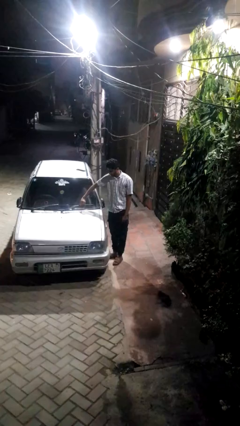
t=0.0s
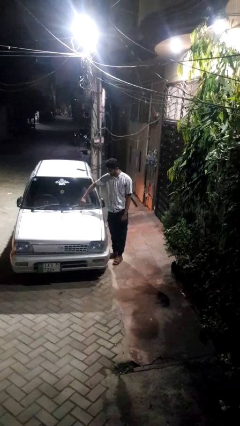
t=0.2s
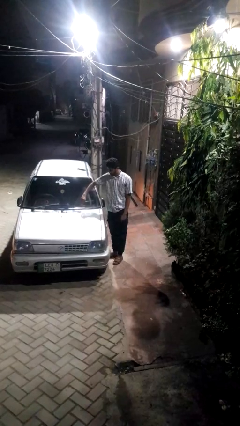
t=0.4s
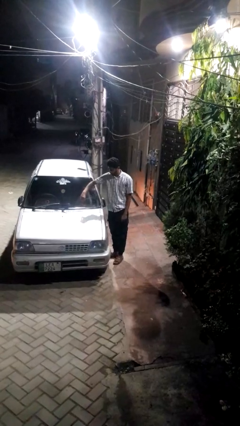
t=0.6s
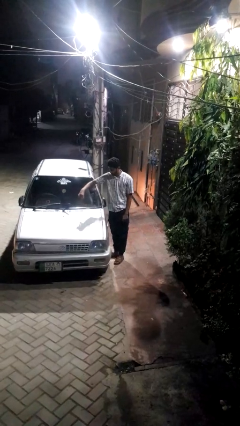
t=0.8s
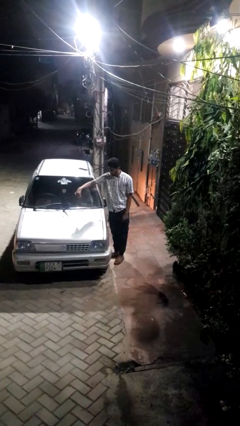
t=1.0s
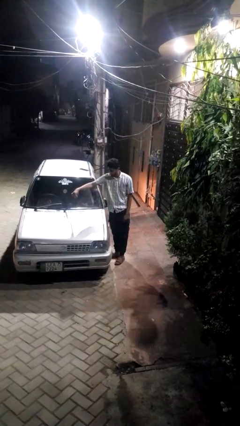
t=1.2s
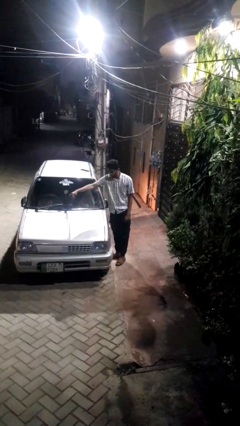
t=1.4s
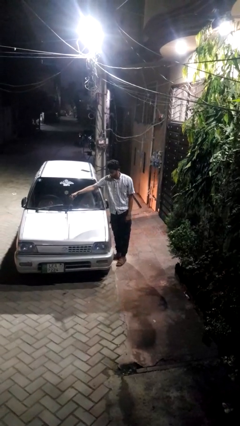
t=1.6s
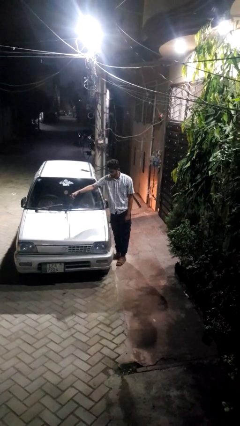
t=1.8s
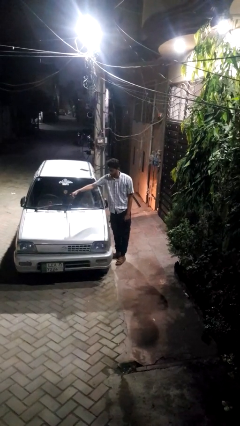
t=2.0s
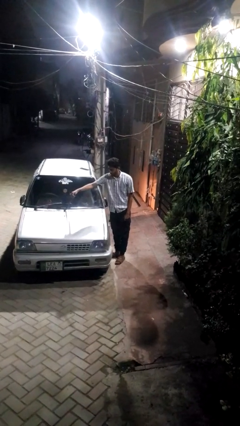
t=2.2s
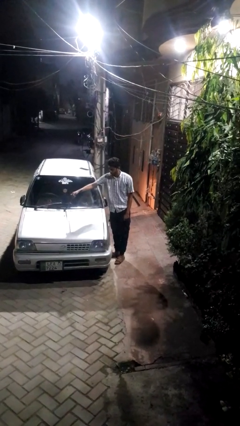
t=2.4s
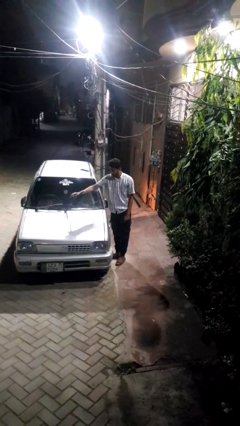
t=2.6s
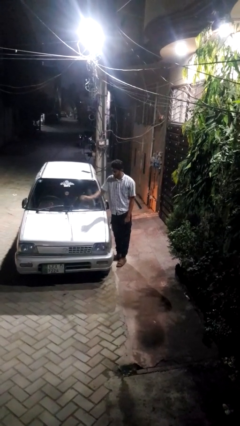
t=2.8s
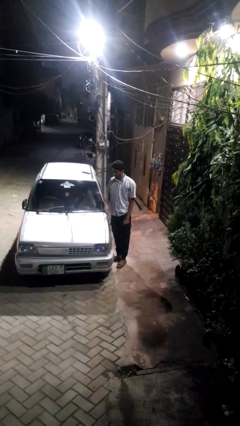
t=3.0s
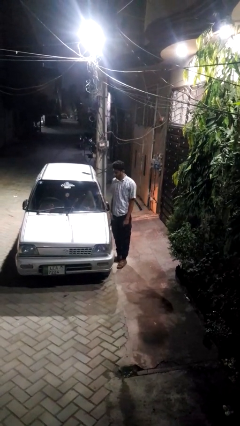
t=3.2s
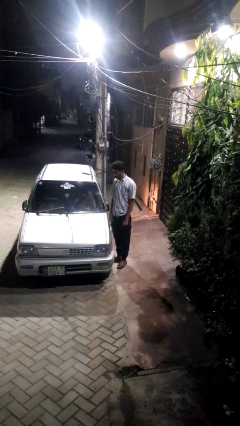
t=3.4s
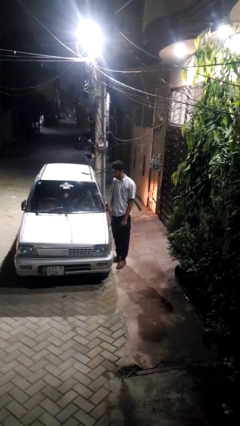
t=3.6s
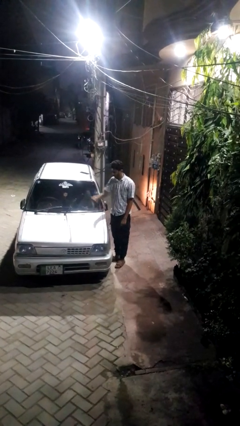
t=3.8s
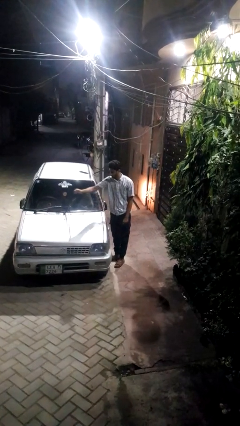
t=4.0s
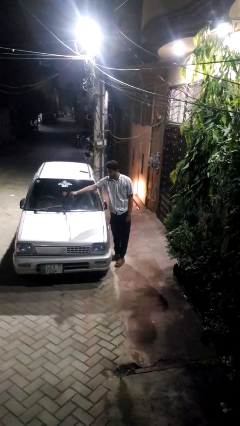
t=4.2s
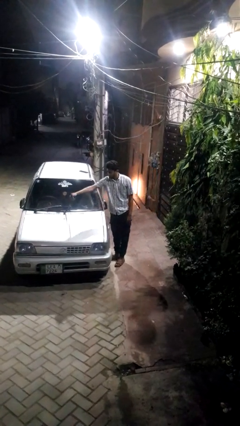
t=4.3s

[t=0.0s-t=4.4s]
person flips up car wipers

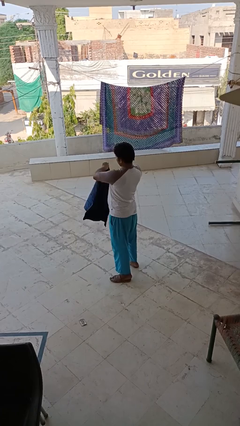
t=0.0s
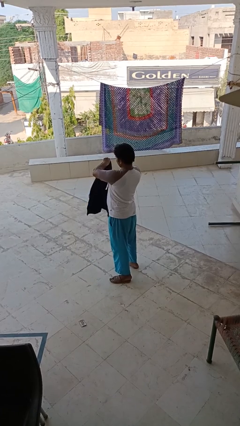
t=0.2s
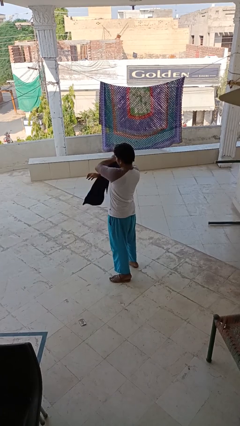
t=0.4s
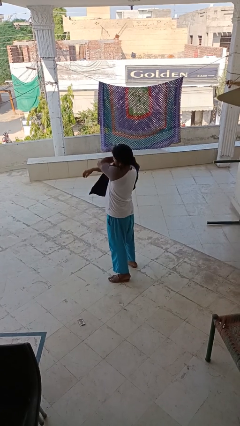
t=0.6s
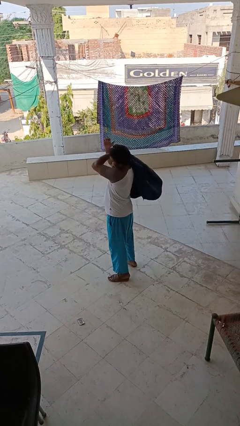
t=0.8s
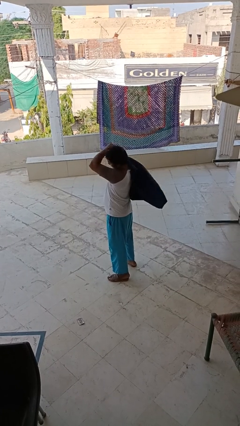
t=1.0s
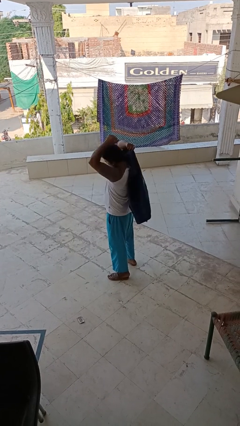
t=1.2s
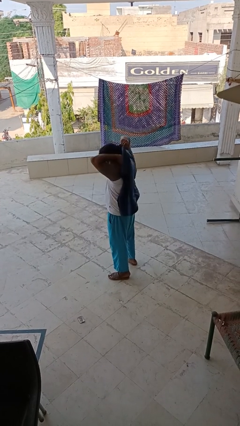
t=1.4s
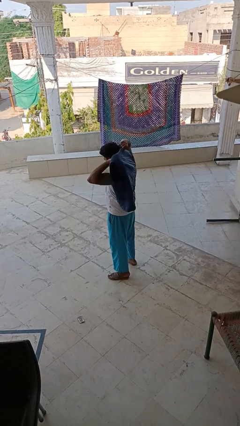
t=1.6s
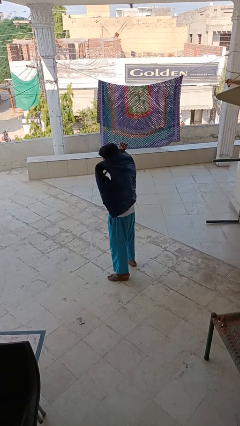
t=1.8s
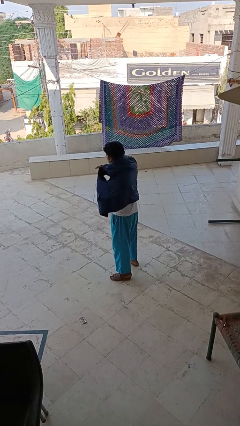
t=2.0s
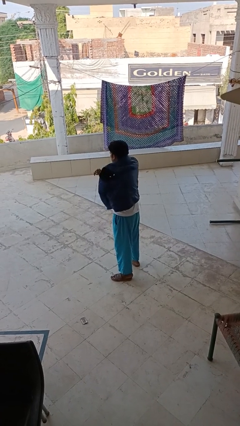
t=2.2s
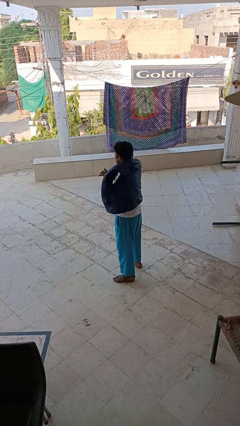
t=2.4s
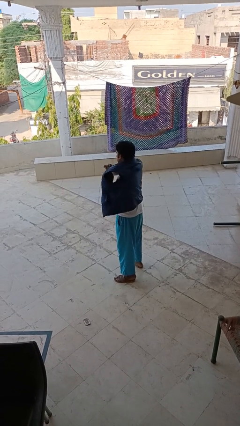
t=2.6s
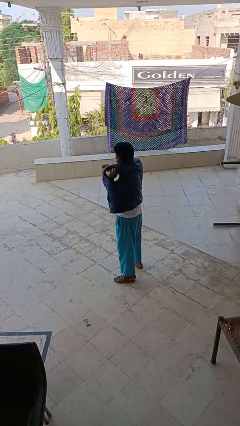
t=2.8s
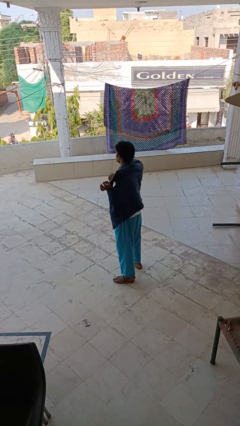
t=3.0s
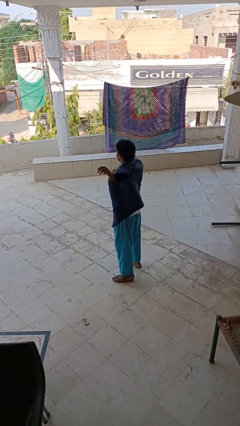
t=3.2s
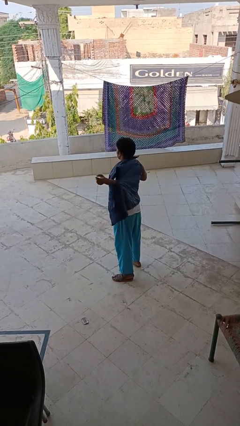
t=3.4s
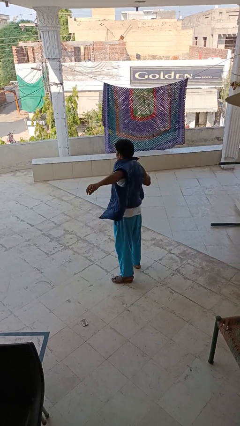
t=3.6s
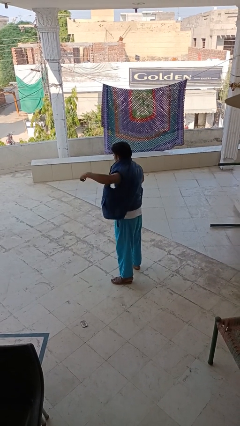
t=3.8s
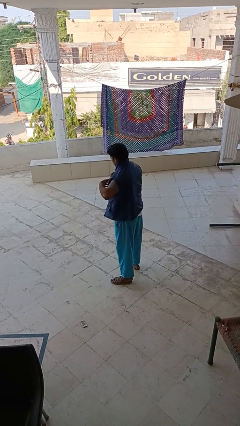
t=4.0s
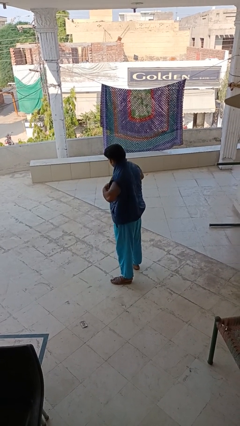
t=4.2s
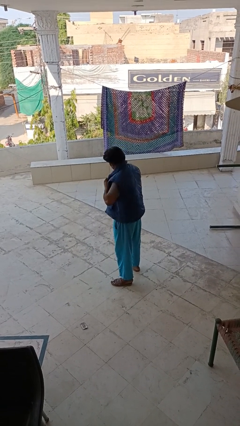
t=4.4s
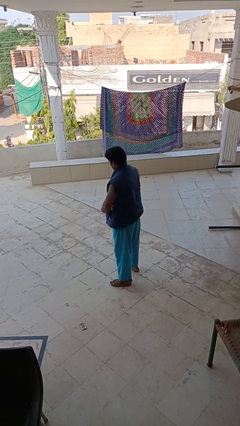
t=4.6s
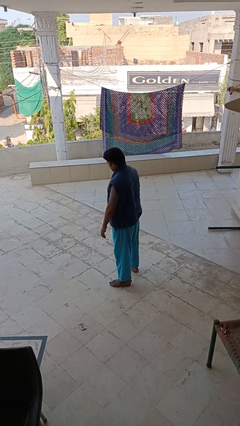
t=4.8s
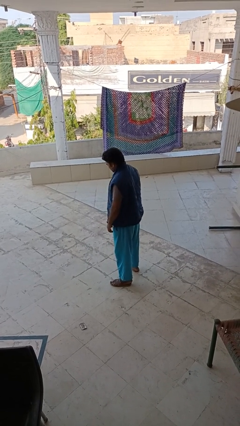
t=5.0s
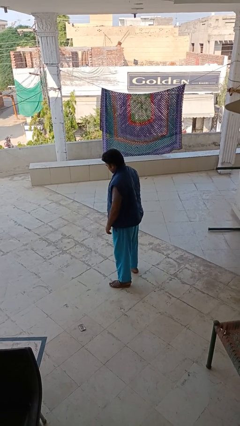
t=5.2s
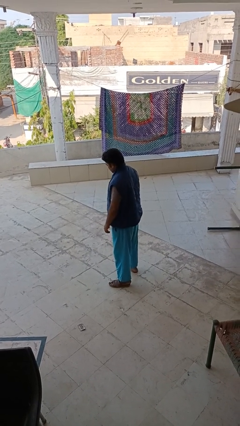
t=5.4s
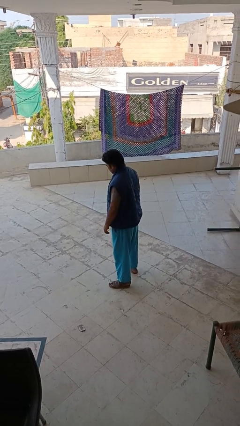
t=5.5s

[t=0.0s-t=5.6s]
person puts on jacket

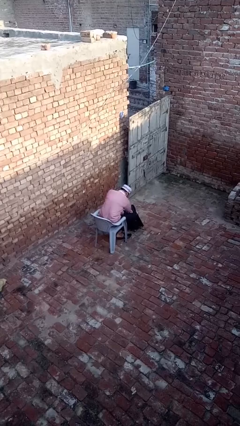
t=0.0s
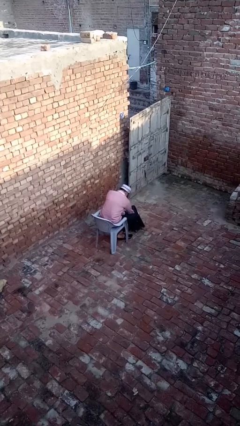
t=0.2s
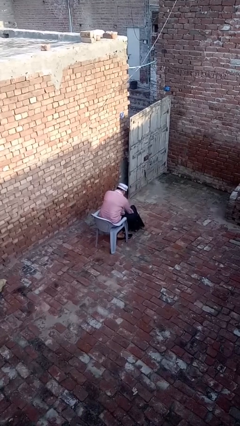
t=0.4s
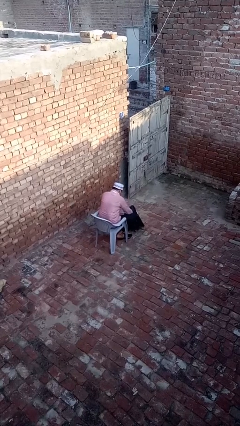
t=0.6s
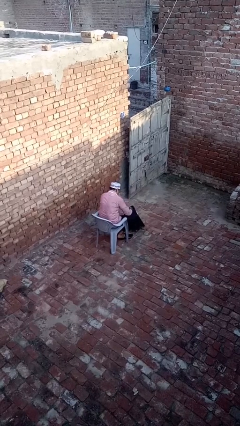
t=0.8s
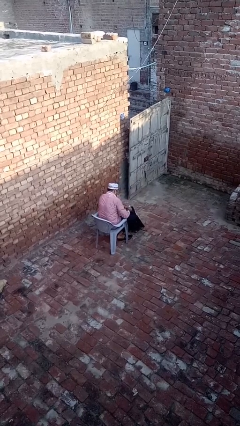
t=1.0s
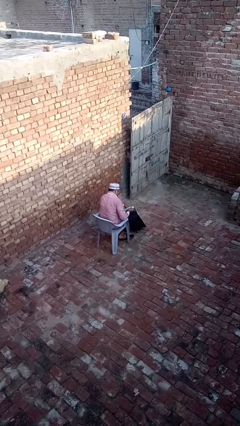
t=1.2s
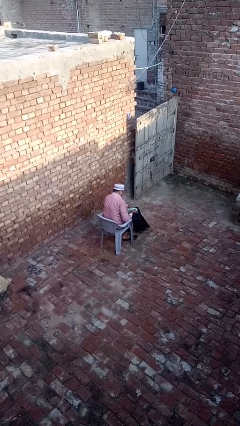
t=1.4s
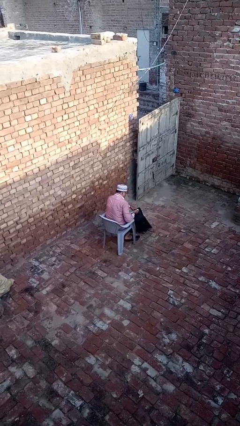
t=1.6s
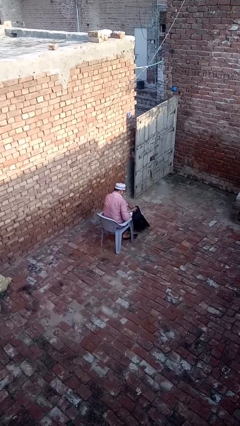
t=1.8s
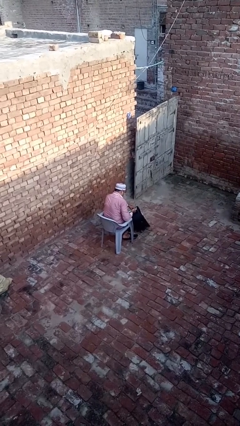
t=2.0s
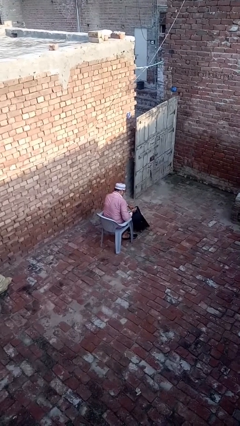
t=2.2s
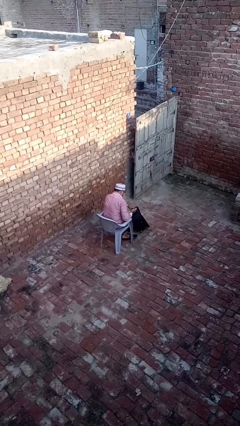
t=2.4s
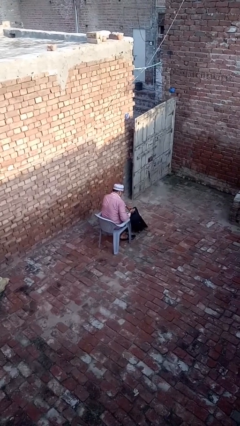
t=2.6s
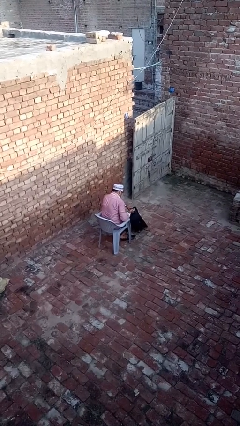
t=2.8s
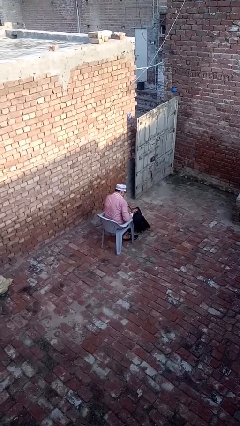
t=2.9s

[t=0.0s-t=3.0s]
person takes object from backpack

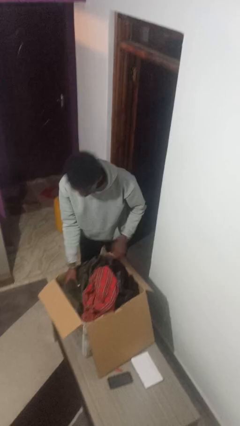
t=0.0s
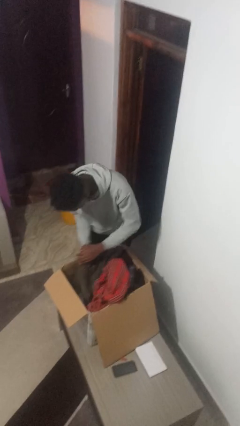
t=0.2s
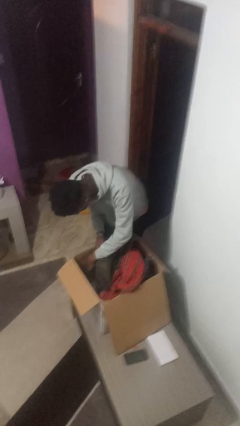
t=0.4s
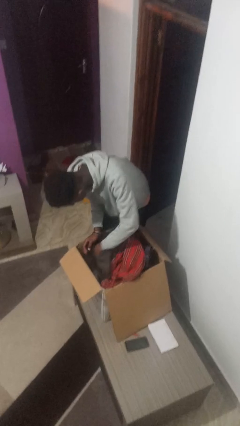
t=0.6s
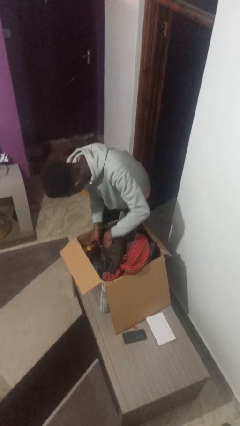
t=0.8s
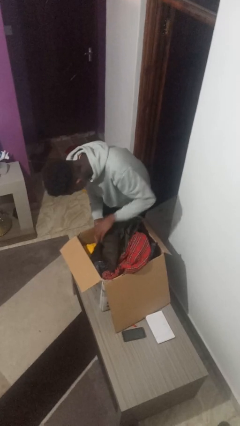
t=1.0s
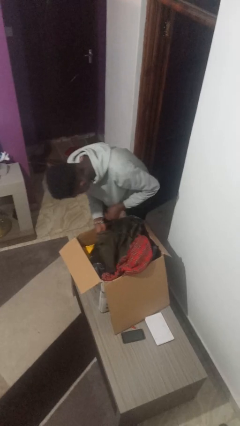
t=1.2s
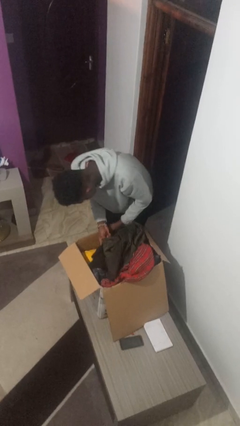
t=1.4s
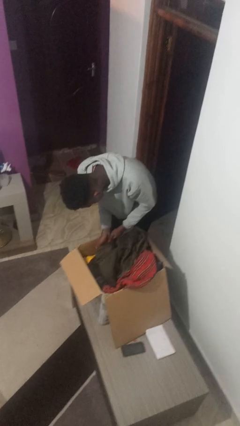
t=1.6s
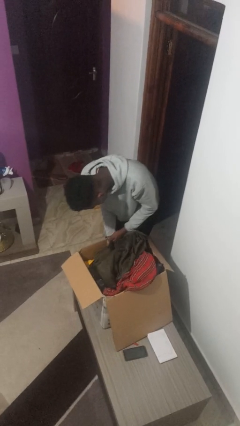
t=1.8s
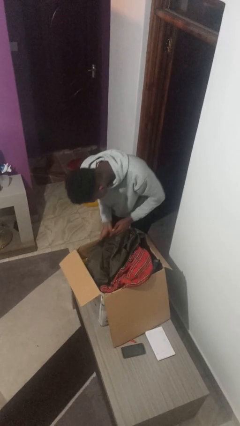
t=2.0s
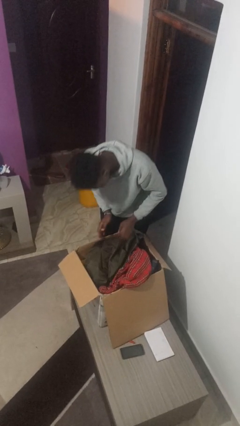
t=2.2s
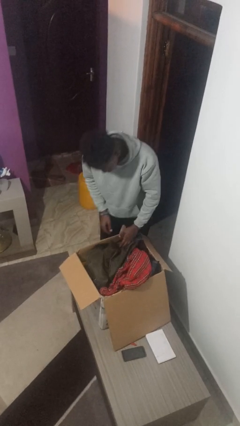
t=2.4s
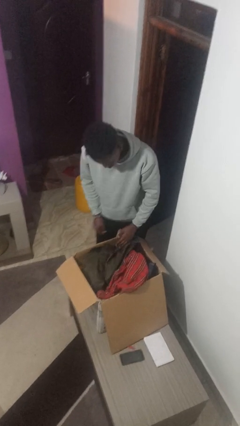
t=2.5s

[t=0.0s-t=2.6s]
person searches in box

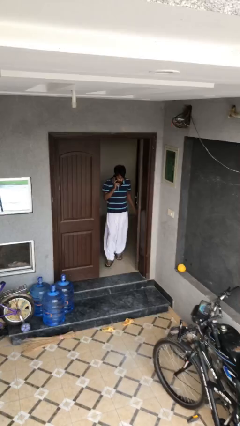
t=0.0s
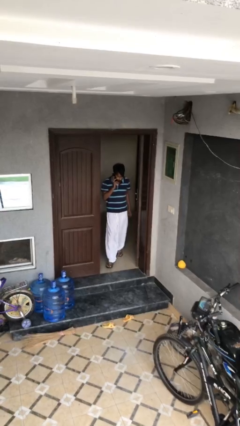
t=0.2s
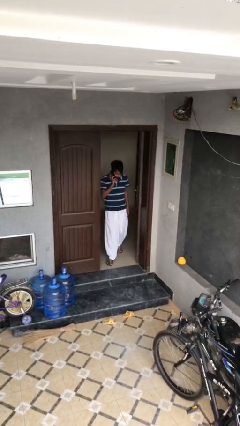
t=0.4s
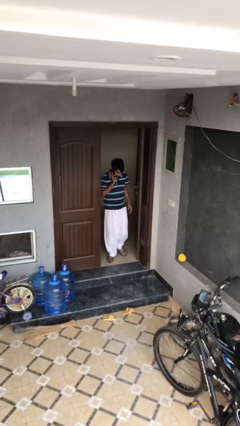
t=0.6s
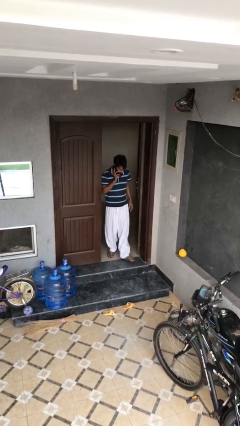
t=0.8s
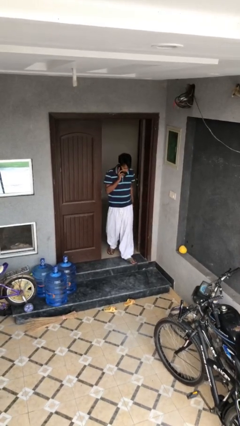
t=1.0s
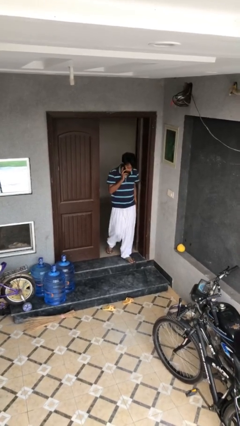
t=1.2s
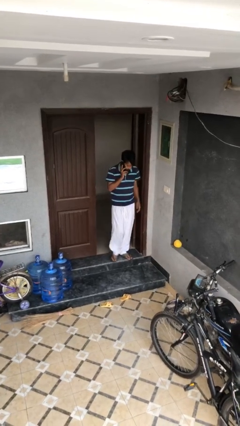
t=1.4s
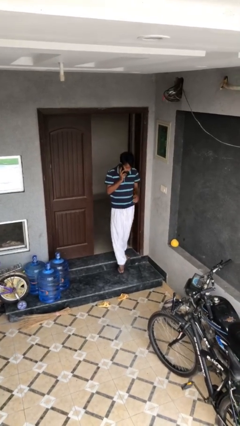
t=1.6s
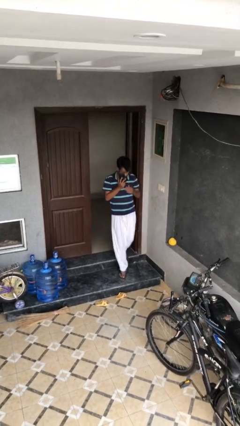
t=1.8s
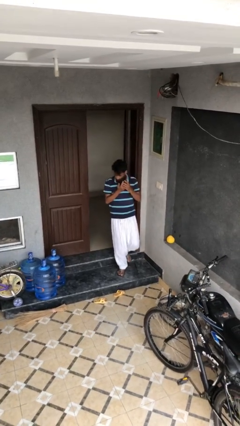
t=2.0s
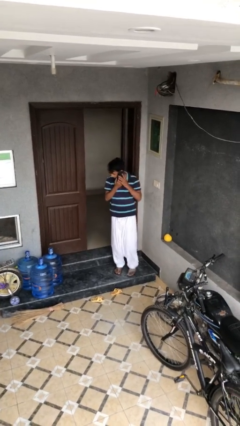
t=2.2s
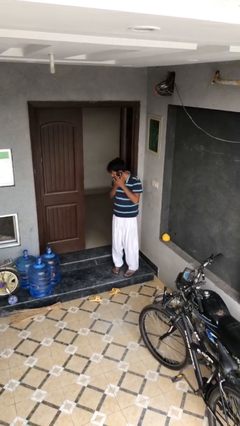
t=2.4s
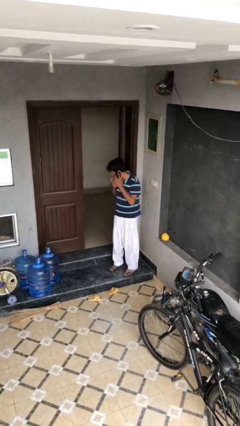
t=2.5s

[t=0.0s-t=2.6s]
person enters scene through structure
